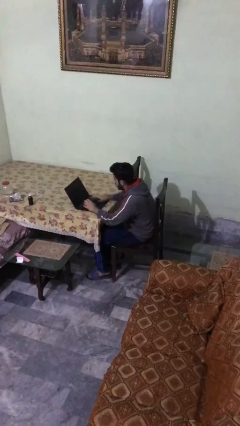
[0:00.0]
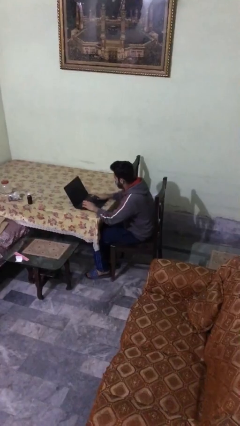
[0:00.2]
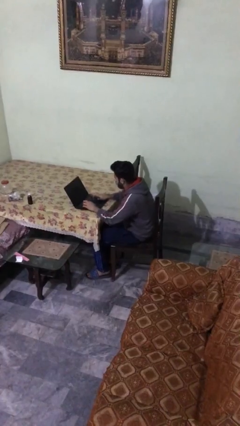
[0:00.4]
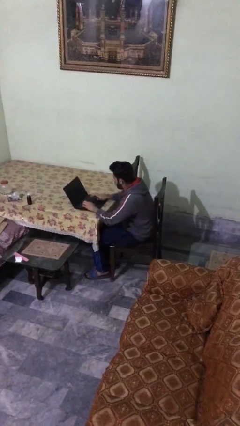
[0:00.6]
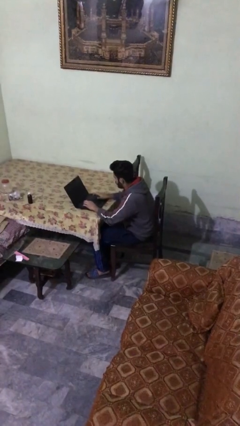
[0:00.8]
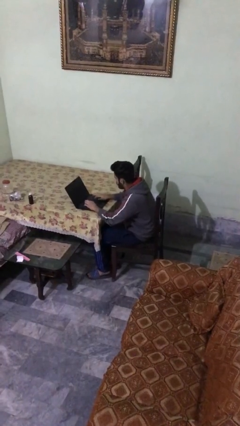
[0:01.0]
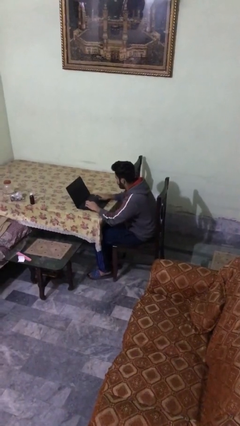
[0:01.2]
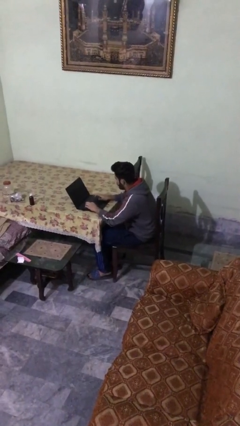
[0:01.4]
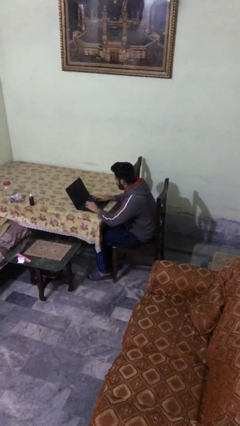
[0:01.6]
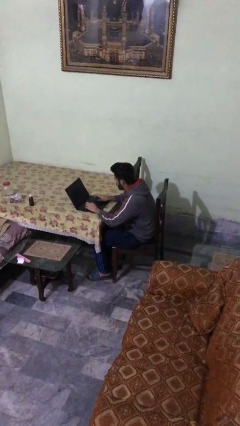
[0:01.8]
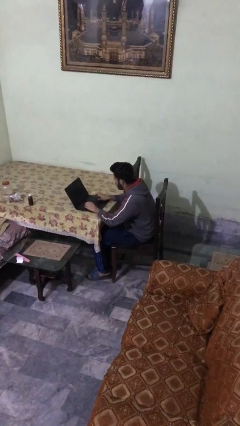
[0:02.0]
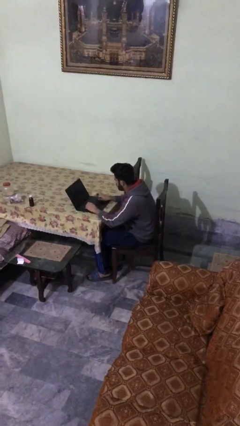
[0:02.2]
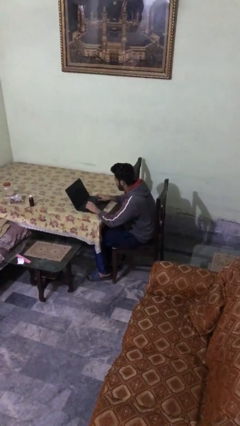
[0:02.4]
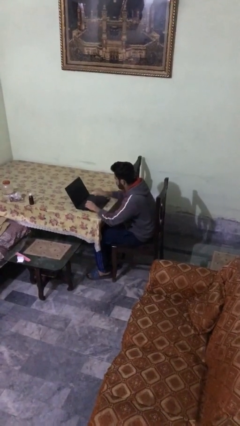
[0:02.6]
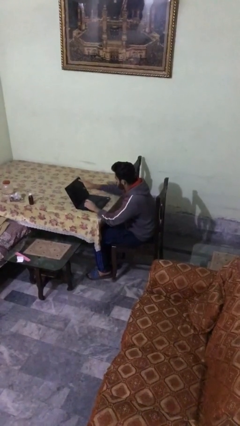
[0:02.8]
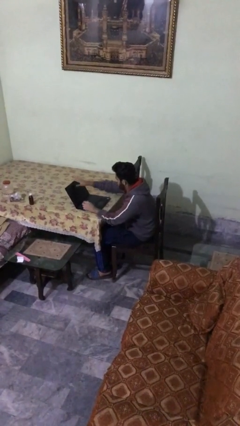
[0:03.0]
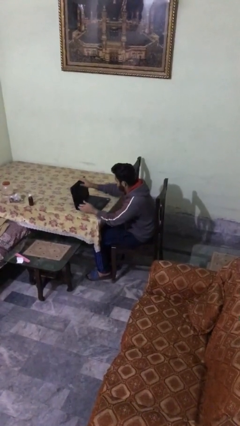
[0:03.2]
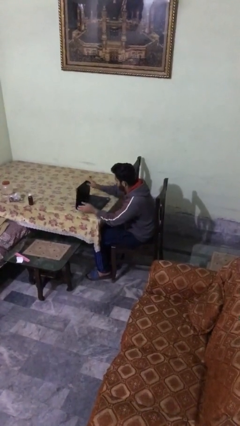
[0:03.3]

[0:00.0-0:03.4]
person interacts with laptop

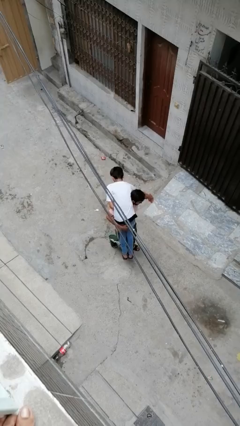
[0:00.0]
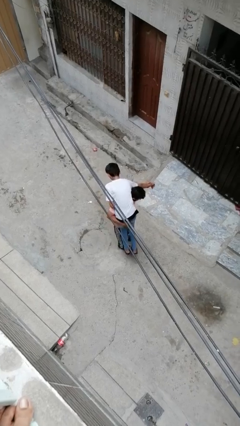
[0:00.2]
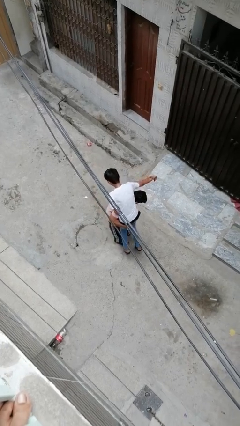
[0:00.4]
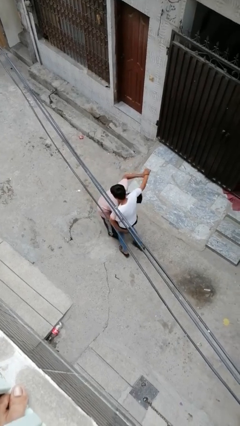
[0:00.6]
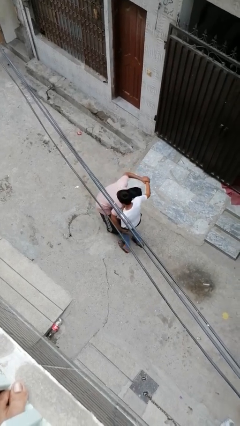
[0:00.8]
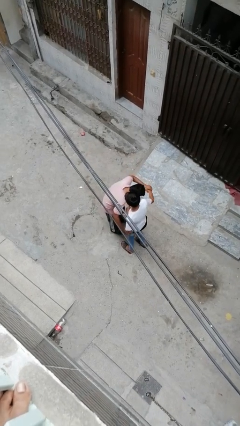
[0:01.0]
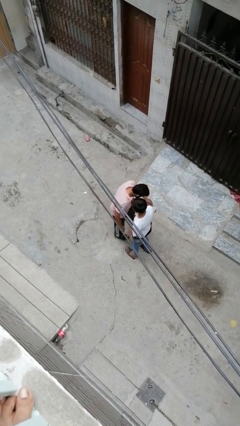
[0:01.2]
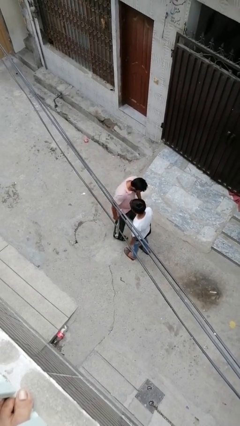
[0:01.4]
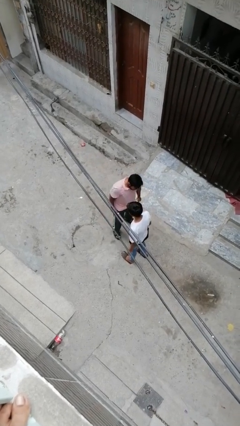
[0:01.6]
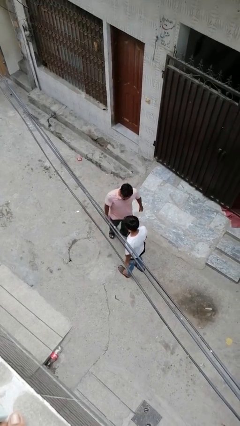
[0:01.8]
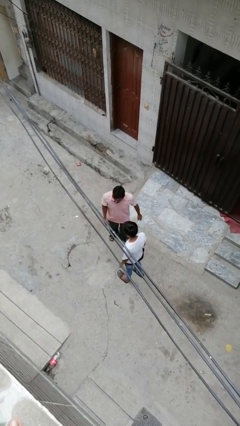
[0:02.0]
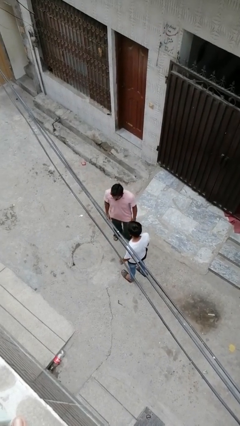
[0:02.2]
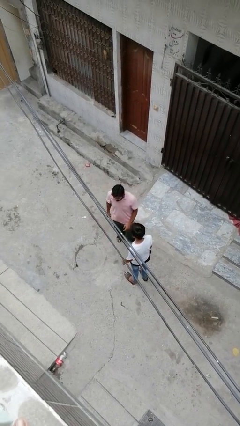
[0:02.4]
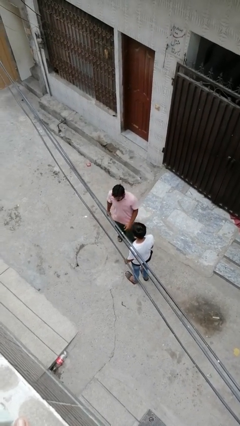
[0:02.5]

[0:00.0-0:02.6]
person puts down person

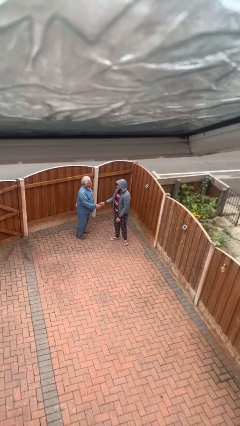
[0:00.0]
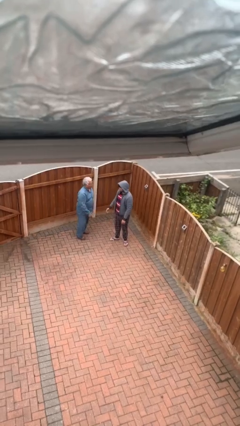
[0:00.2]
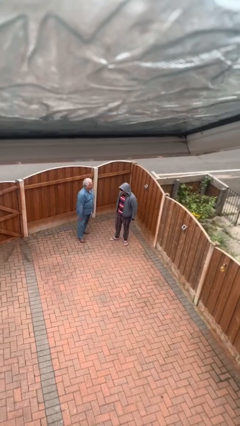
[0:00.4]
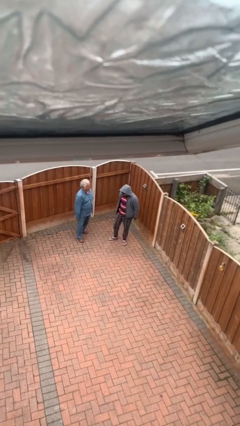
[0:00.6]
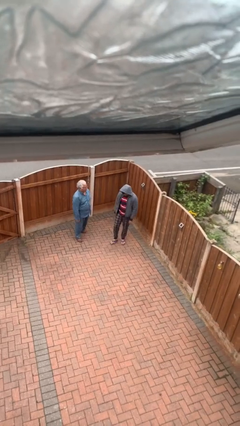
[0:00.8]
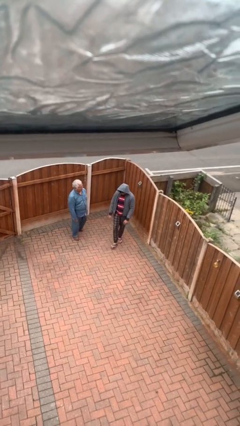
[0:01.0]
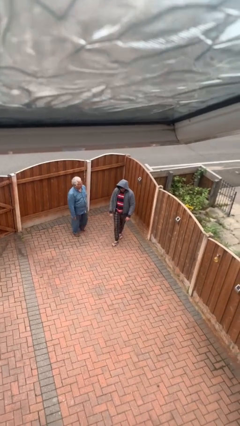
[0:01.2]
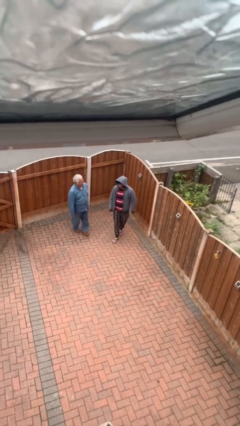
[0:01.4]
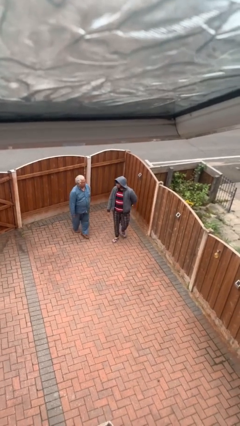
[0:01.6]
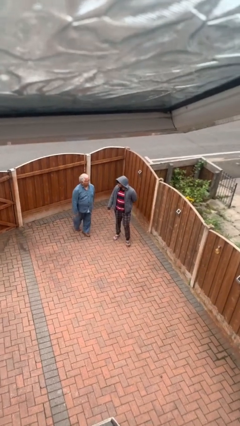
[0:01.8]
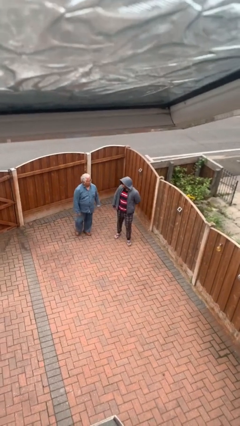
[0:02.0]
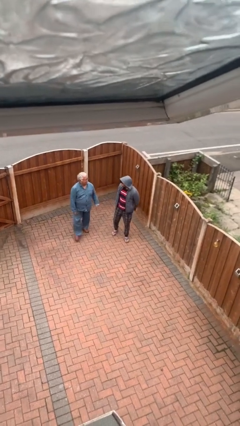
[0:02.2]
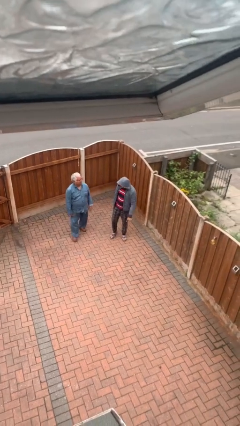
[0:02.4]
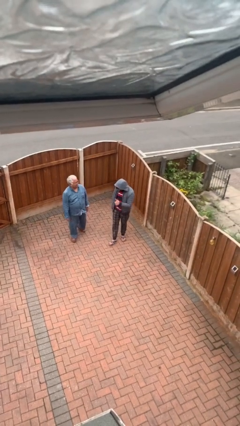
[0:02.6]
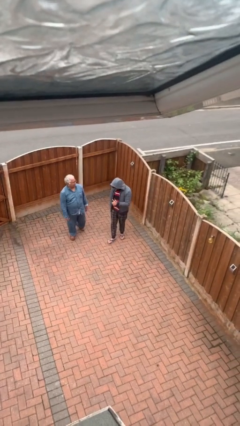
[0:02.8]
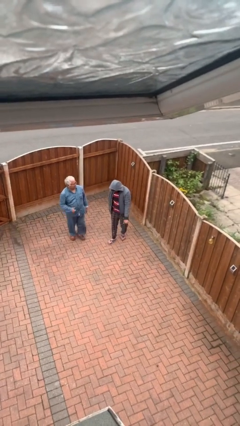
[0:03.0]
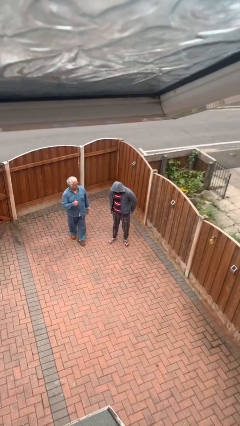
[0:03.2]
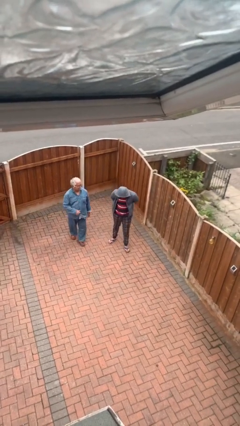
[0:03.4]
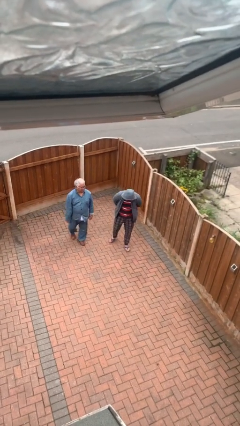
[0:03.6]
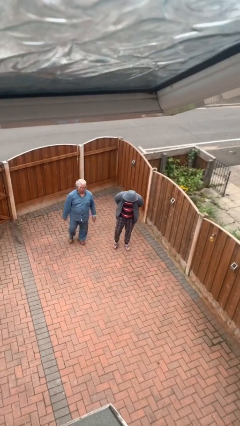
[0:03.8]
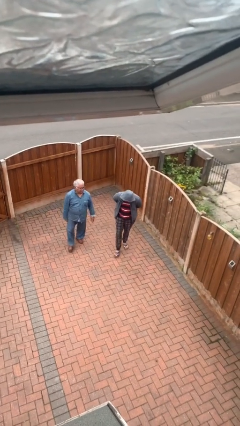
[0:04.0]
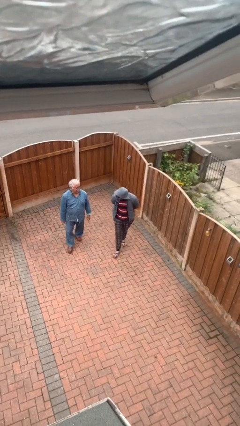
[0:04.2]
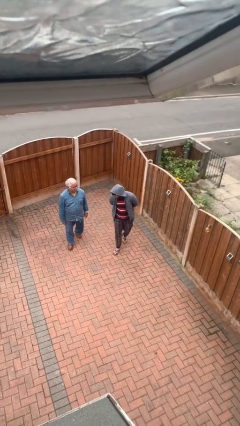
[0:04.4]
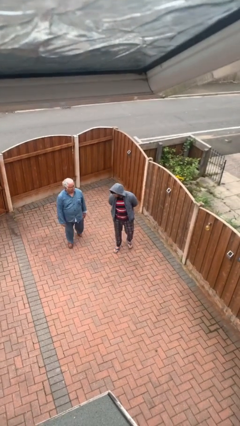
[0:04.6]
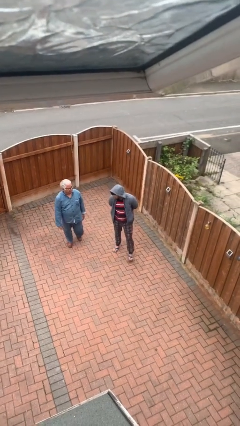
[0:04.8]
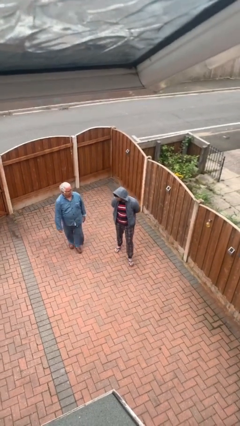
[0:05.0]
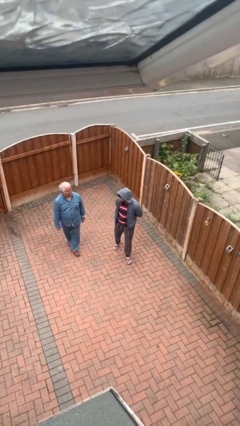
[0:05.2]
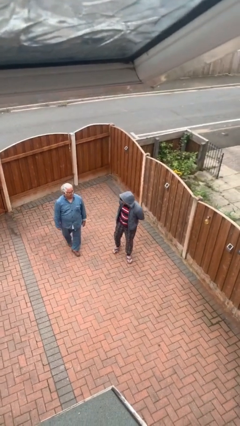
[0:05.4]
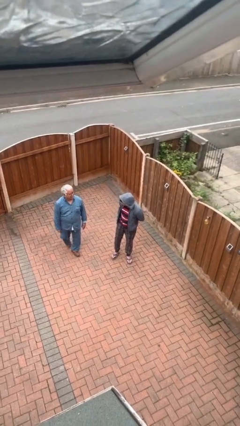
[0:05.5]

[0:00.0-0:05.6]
person talks to person

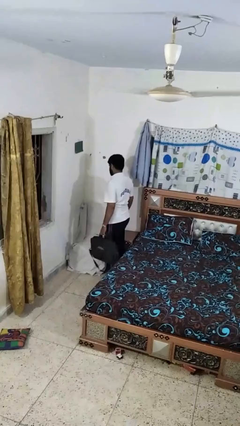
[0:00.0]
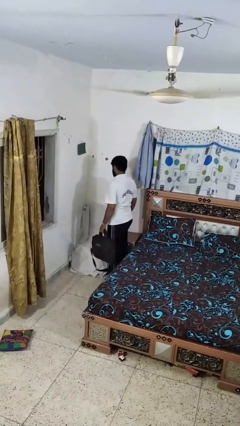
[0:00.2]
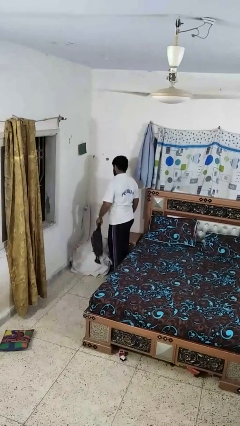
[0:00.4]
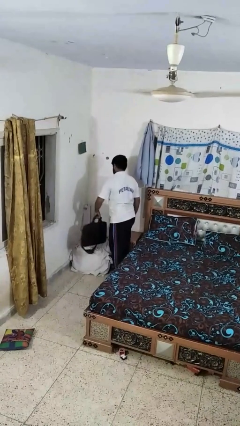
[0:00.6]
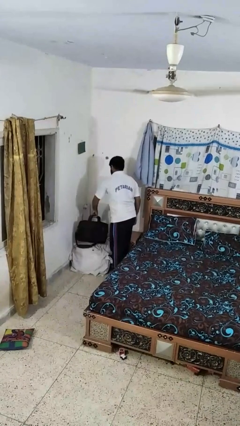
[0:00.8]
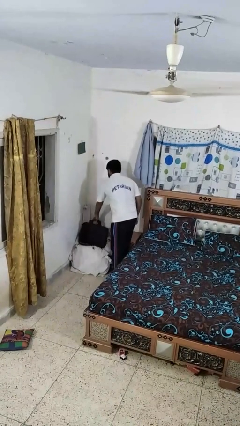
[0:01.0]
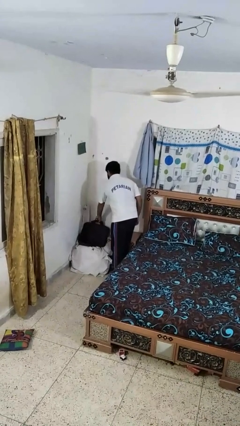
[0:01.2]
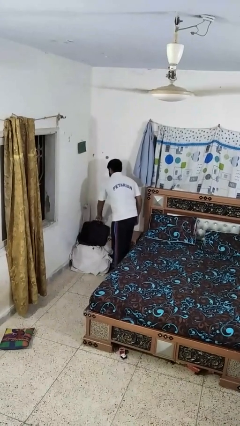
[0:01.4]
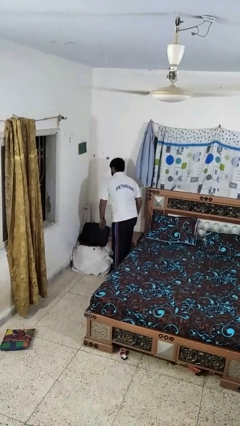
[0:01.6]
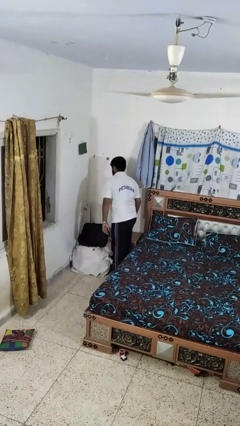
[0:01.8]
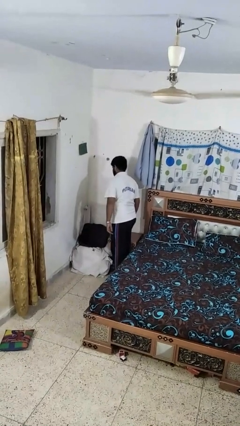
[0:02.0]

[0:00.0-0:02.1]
person puts down object on couch

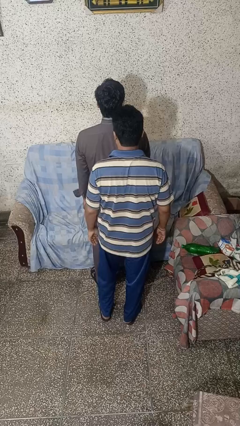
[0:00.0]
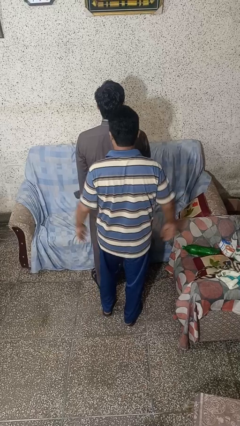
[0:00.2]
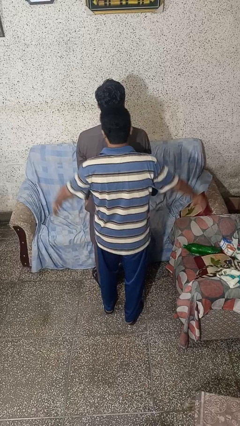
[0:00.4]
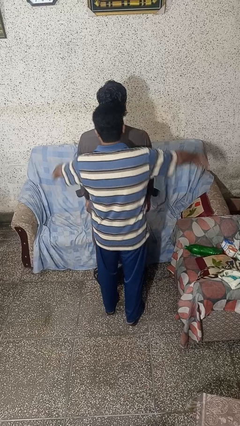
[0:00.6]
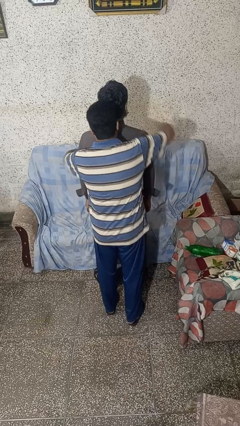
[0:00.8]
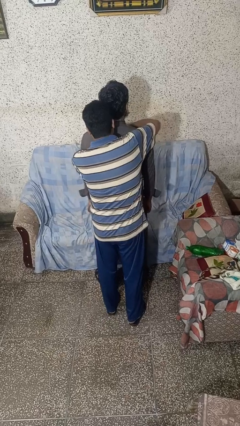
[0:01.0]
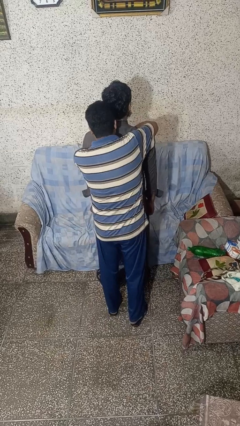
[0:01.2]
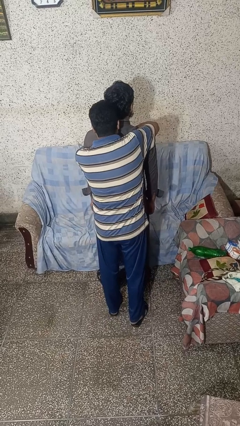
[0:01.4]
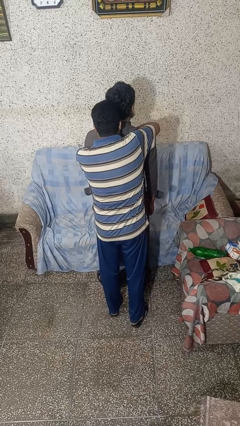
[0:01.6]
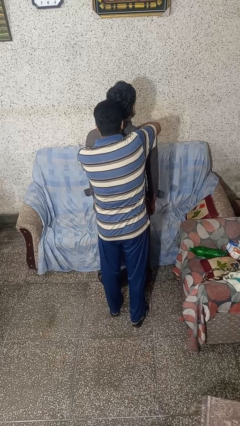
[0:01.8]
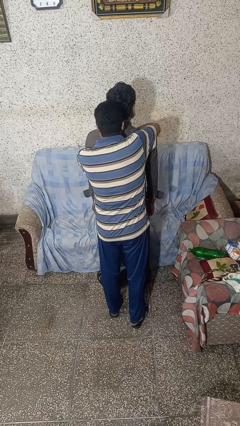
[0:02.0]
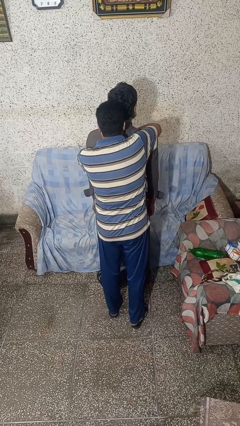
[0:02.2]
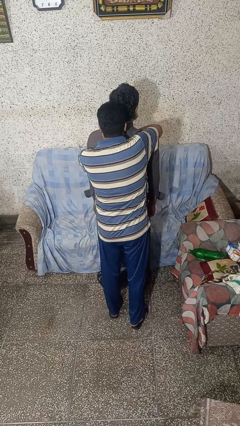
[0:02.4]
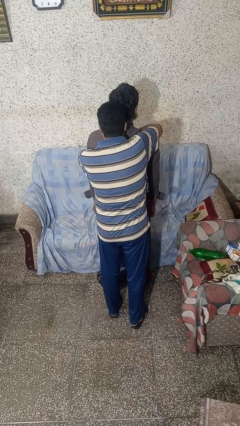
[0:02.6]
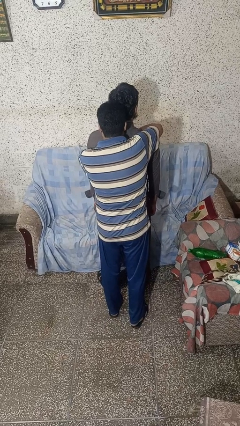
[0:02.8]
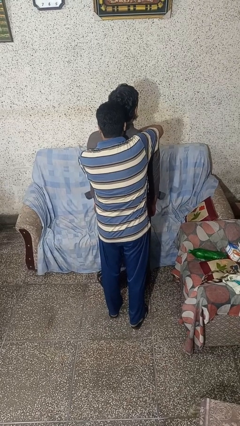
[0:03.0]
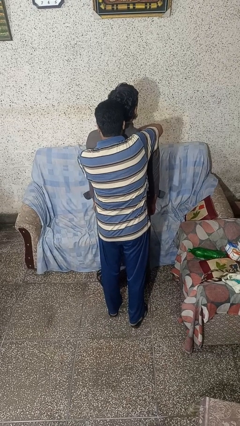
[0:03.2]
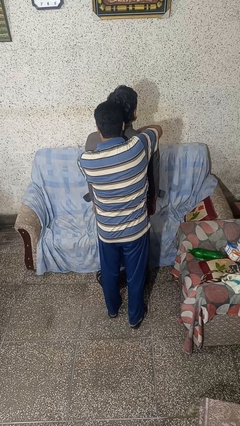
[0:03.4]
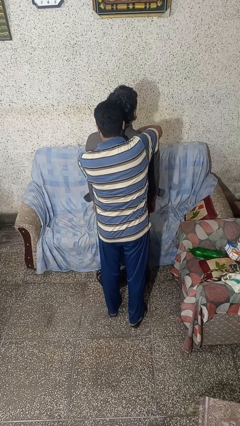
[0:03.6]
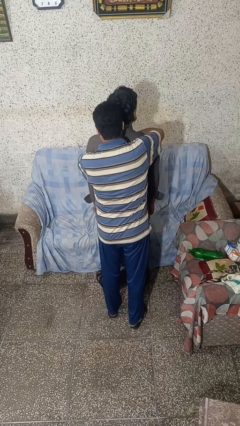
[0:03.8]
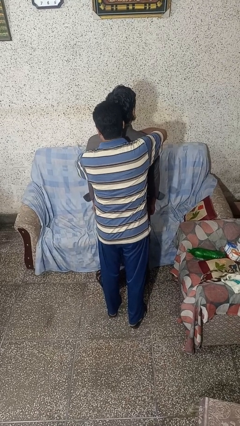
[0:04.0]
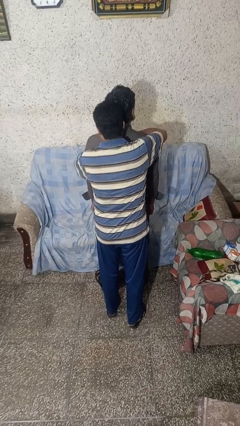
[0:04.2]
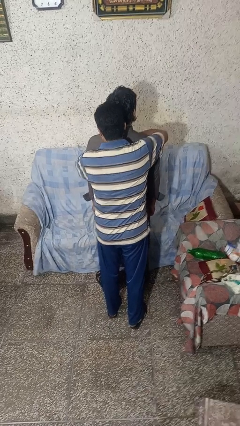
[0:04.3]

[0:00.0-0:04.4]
person hugs person from behind
